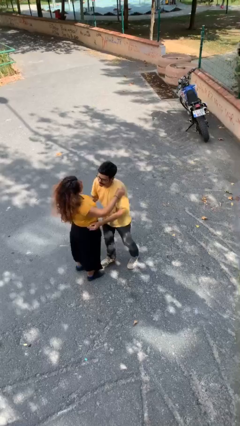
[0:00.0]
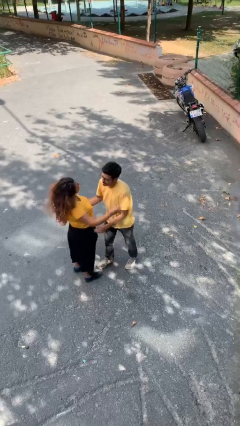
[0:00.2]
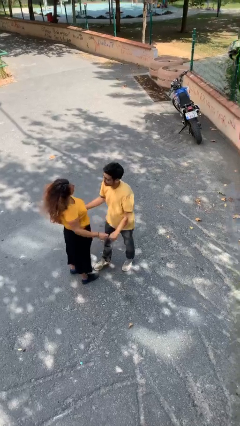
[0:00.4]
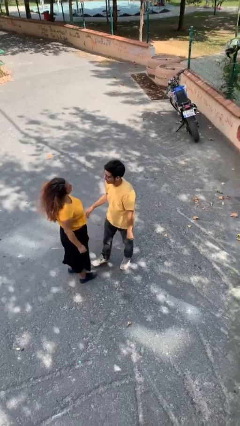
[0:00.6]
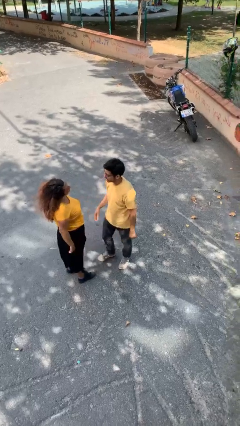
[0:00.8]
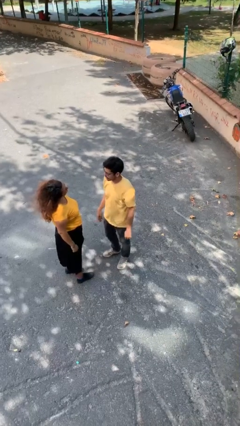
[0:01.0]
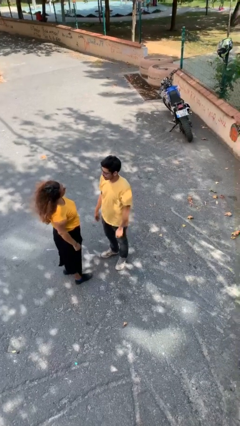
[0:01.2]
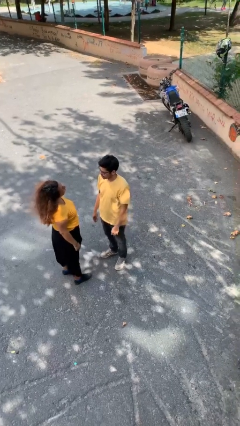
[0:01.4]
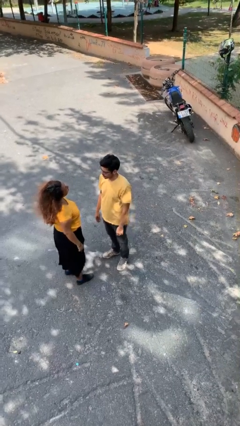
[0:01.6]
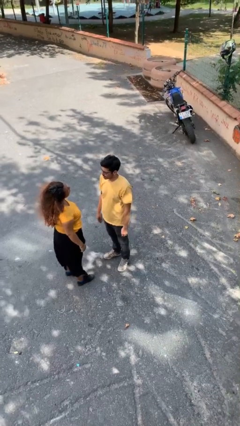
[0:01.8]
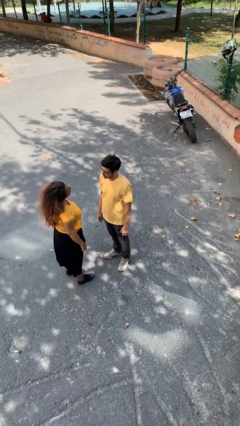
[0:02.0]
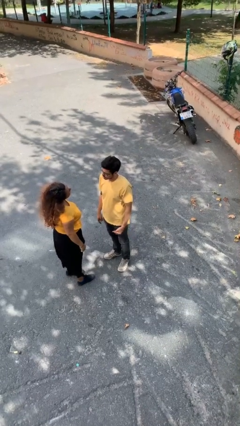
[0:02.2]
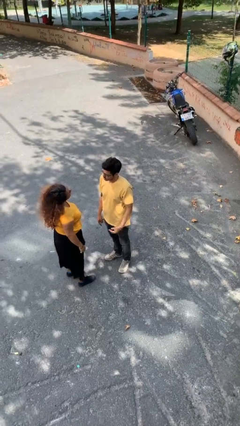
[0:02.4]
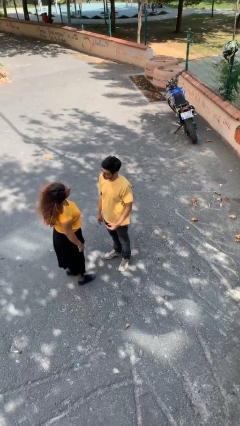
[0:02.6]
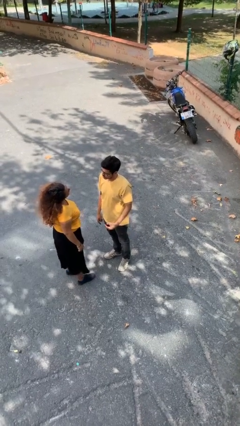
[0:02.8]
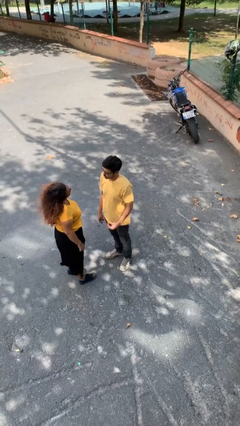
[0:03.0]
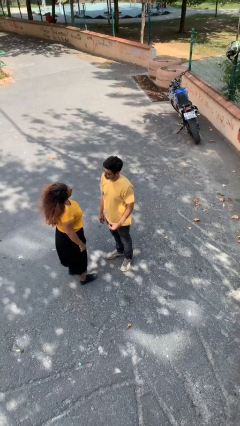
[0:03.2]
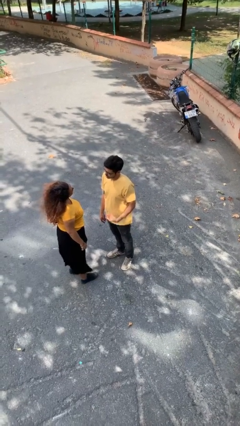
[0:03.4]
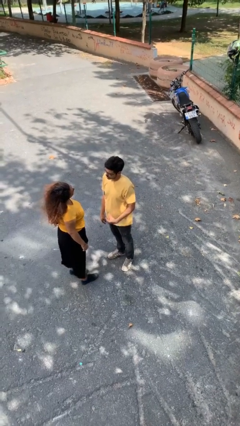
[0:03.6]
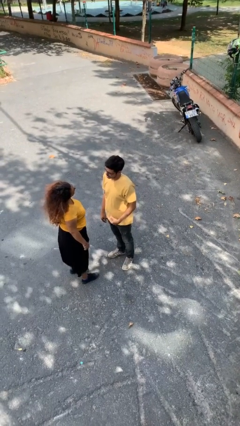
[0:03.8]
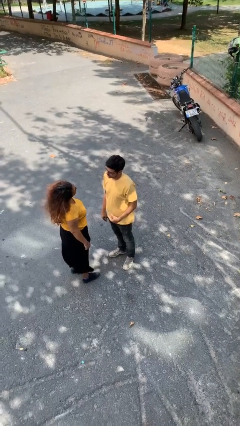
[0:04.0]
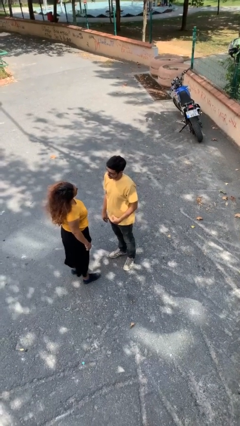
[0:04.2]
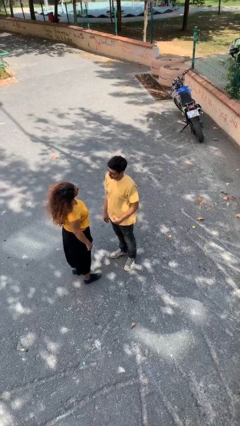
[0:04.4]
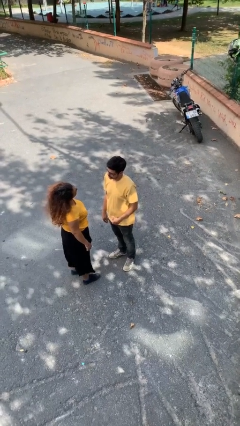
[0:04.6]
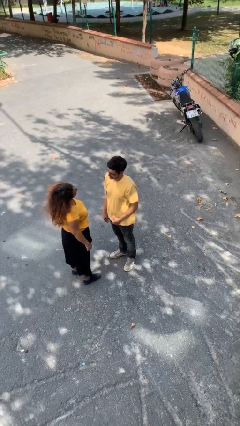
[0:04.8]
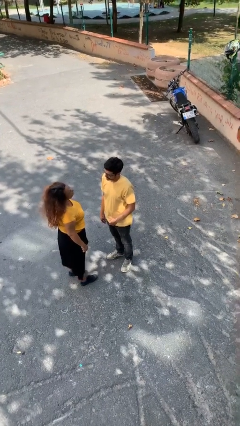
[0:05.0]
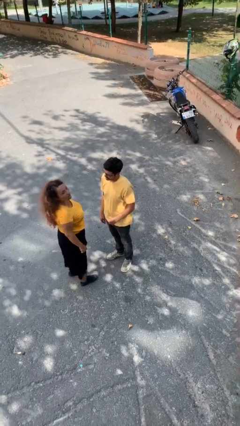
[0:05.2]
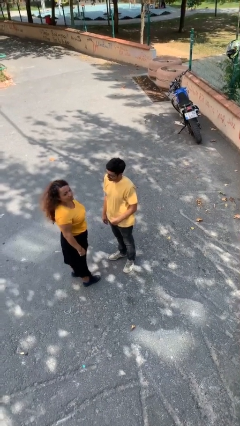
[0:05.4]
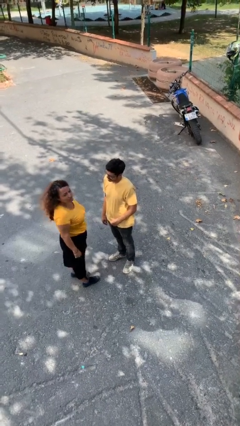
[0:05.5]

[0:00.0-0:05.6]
person talks to person

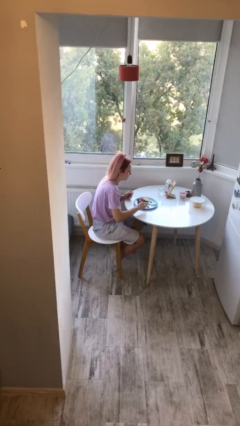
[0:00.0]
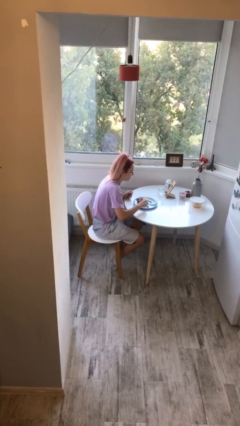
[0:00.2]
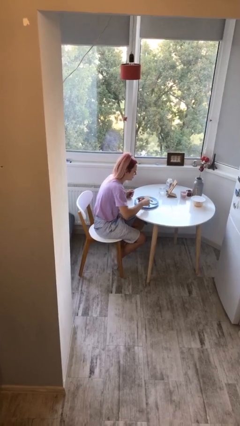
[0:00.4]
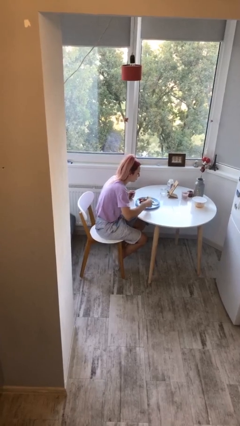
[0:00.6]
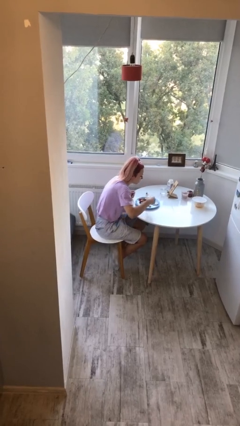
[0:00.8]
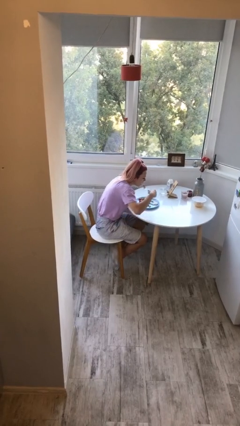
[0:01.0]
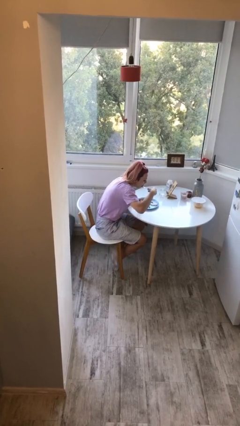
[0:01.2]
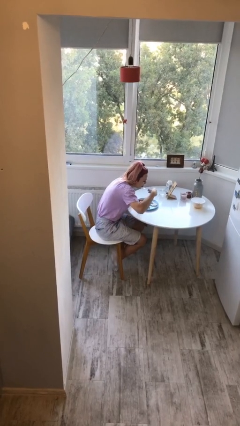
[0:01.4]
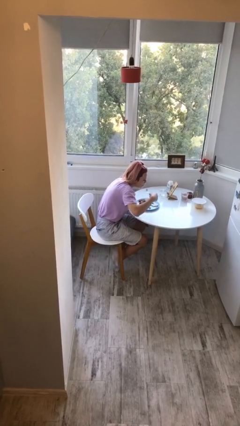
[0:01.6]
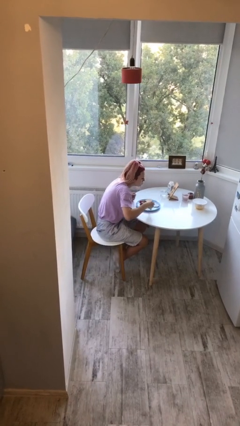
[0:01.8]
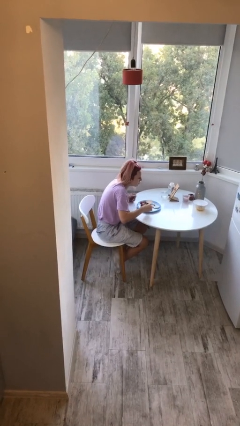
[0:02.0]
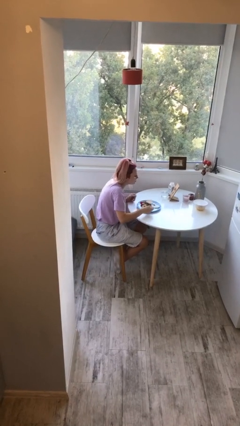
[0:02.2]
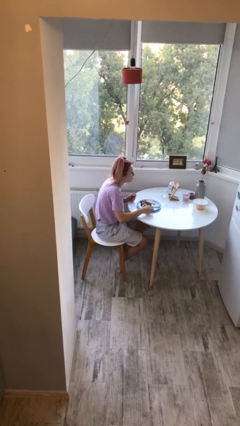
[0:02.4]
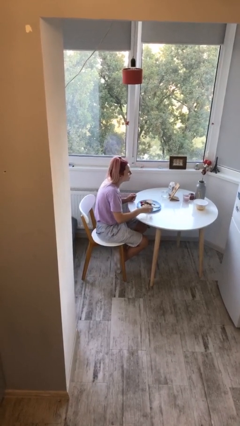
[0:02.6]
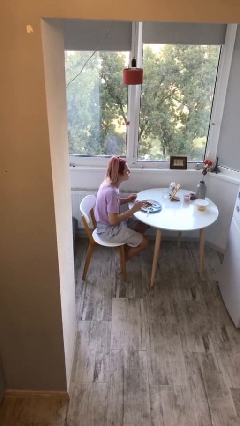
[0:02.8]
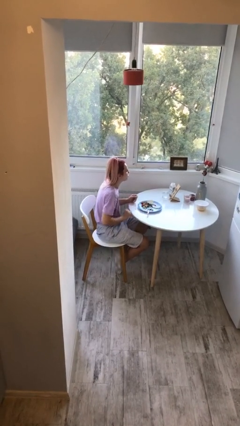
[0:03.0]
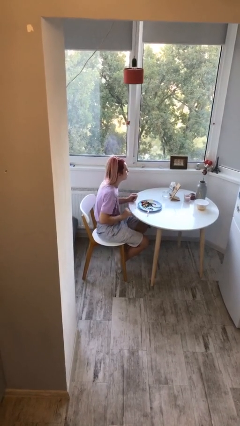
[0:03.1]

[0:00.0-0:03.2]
person eats with utensil

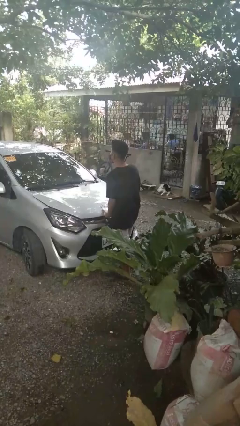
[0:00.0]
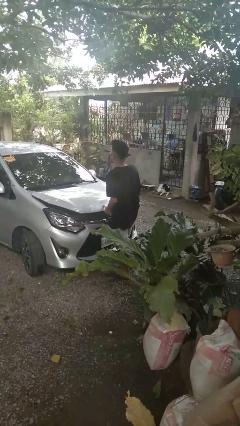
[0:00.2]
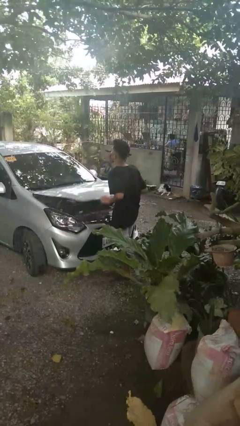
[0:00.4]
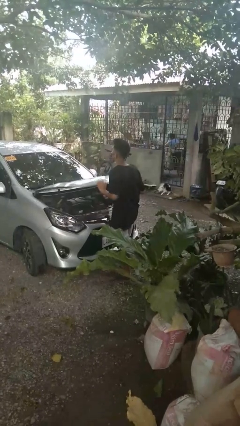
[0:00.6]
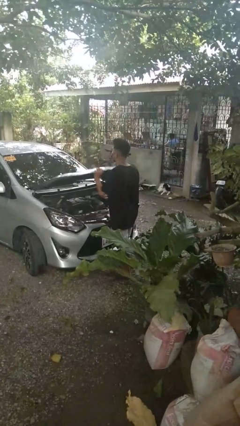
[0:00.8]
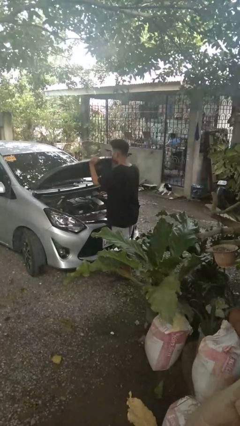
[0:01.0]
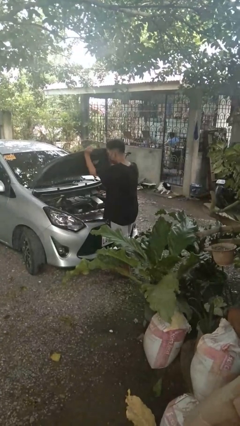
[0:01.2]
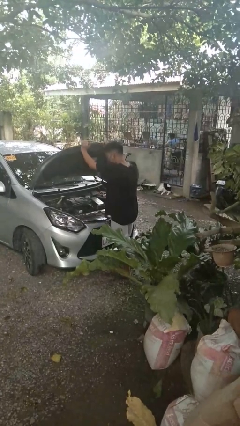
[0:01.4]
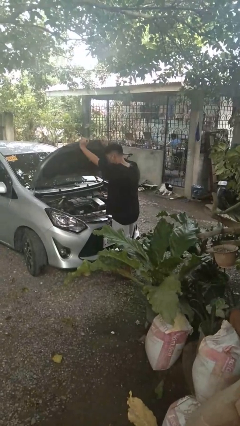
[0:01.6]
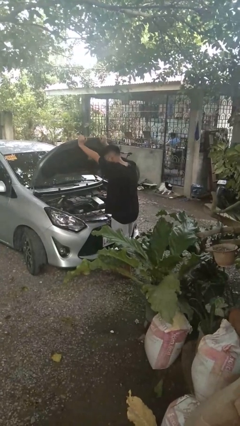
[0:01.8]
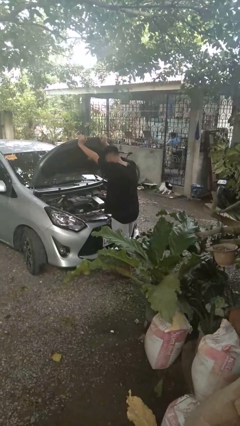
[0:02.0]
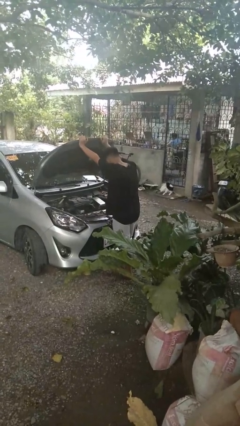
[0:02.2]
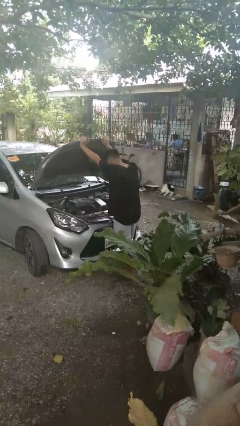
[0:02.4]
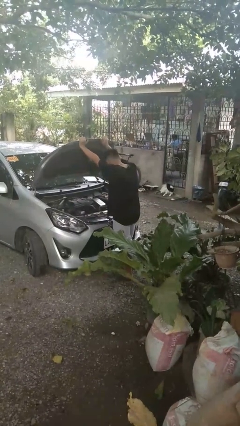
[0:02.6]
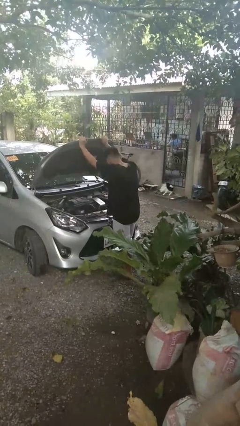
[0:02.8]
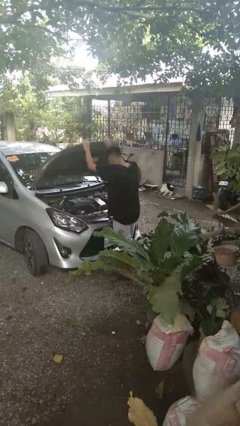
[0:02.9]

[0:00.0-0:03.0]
person opens car hood

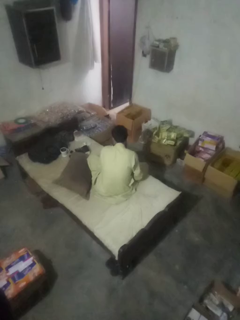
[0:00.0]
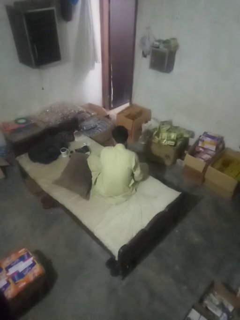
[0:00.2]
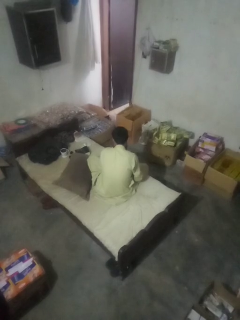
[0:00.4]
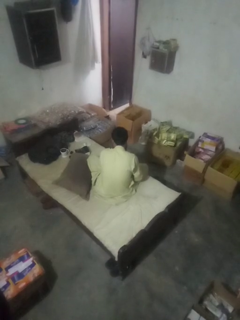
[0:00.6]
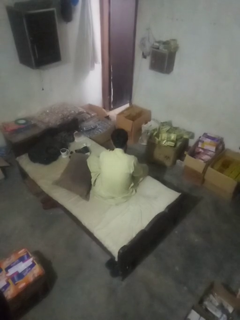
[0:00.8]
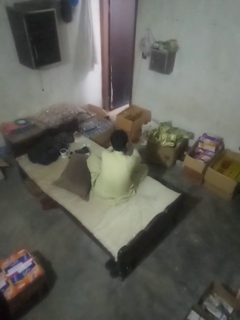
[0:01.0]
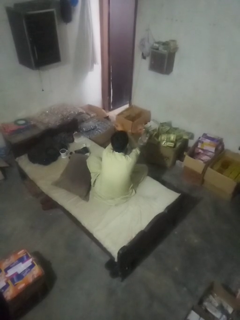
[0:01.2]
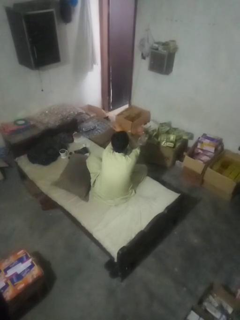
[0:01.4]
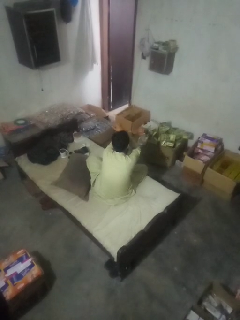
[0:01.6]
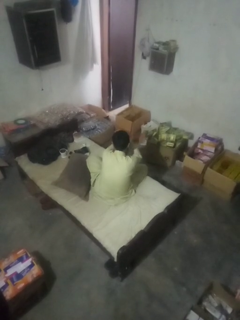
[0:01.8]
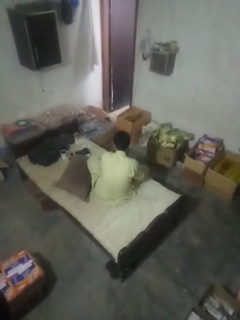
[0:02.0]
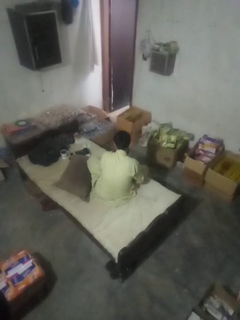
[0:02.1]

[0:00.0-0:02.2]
person gestures arms x

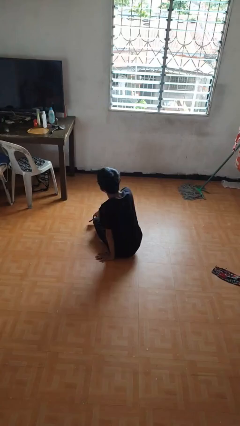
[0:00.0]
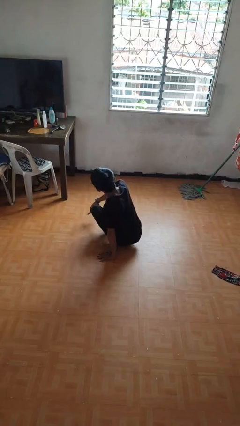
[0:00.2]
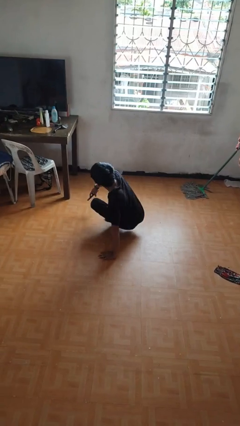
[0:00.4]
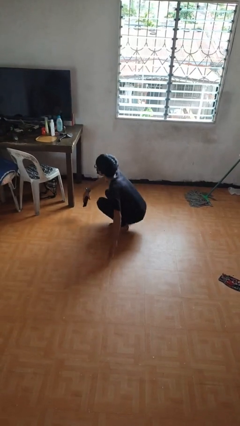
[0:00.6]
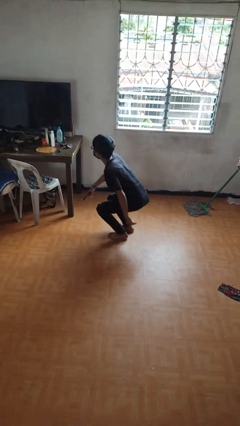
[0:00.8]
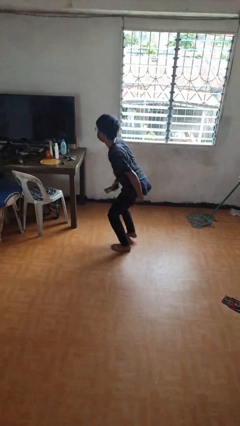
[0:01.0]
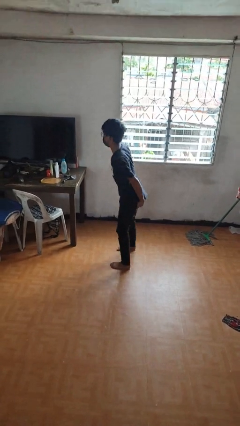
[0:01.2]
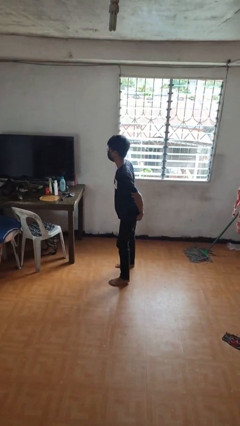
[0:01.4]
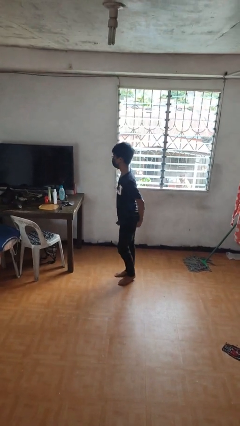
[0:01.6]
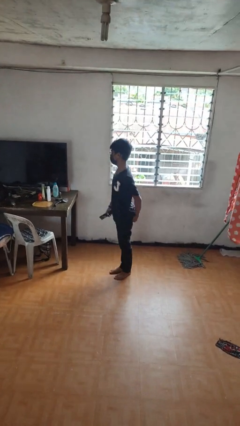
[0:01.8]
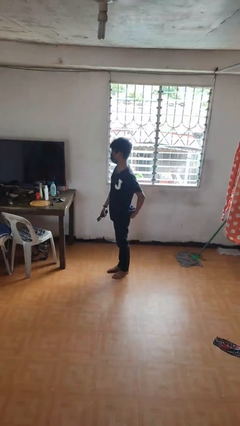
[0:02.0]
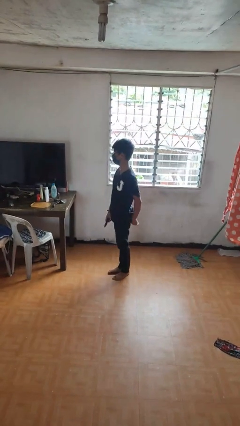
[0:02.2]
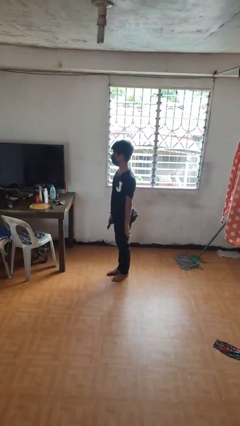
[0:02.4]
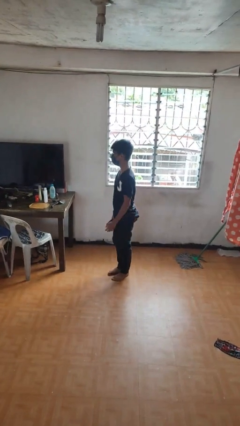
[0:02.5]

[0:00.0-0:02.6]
person stands up from floor

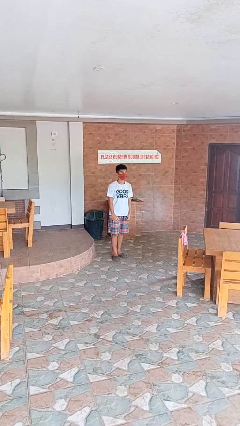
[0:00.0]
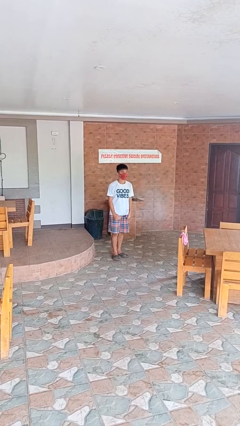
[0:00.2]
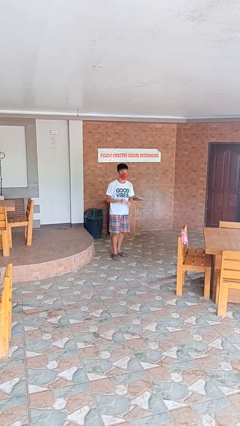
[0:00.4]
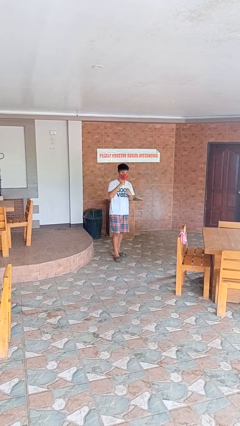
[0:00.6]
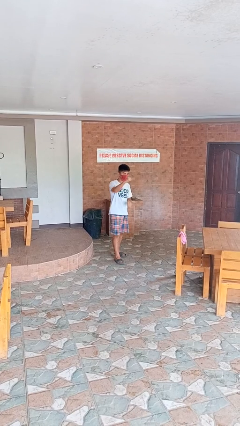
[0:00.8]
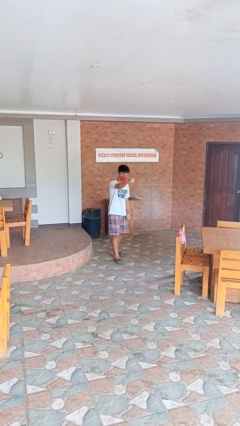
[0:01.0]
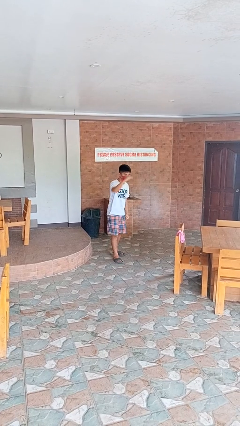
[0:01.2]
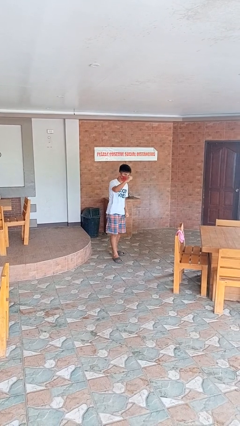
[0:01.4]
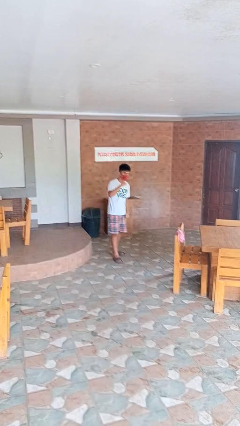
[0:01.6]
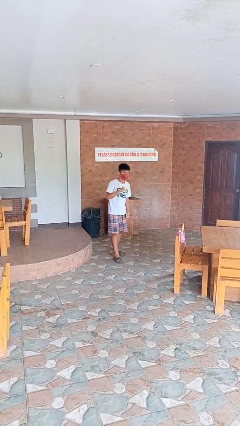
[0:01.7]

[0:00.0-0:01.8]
person punches
